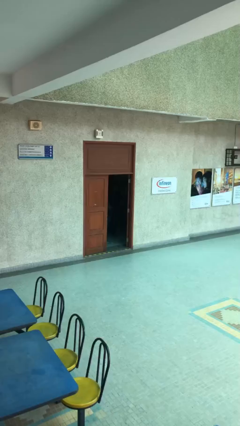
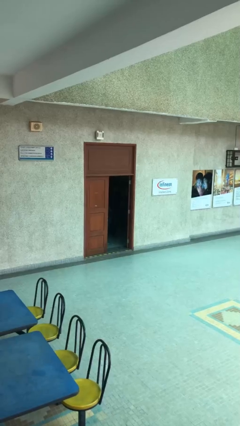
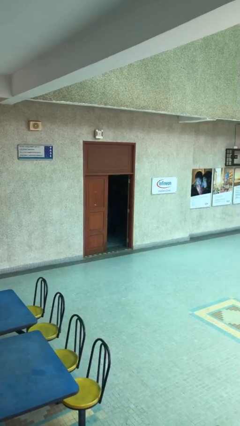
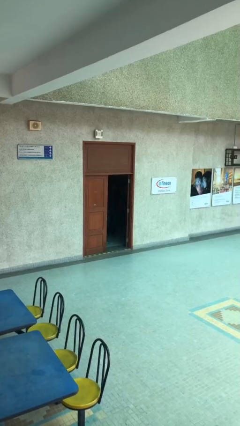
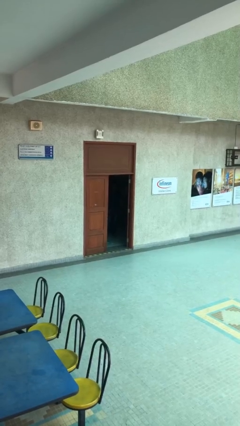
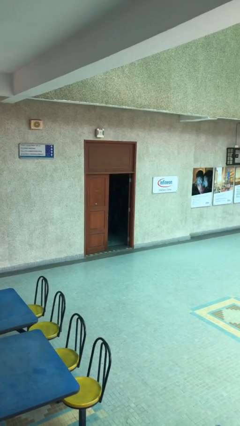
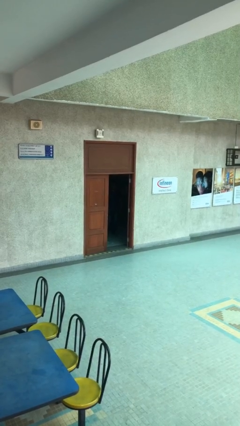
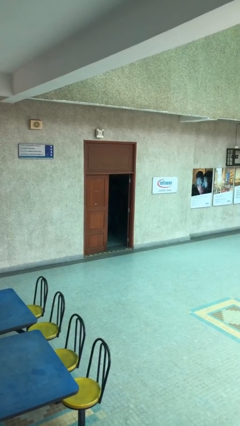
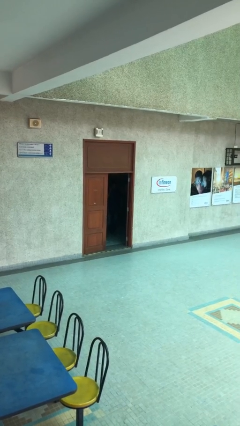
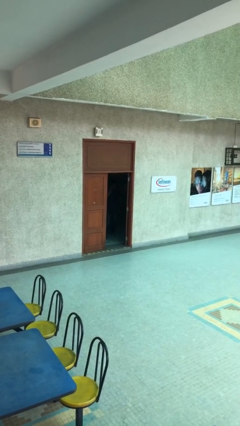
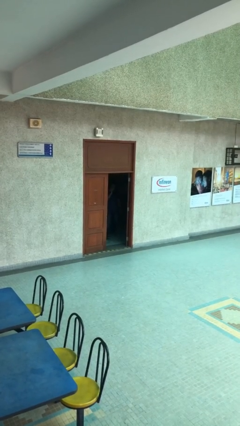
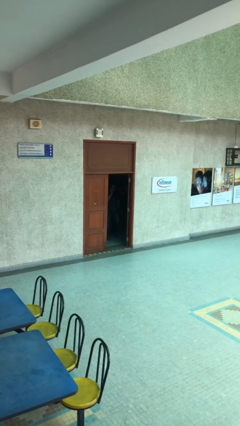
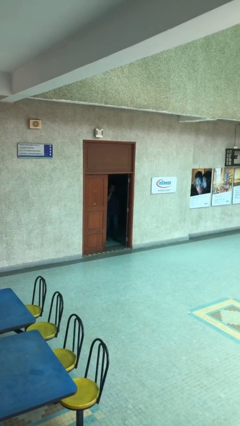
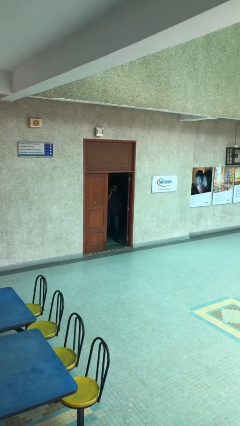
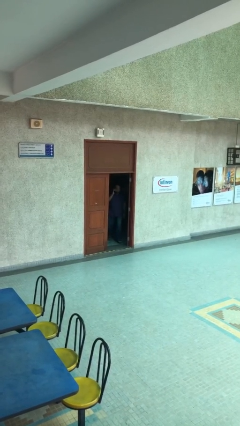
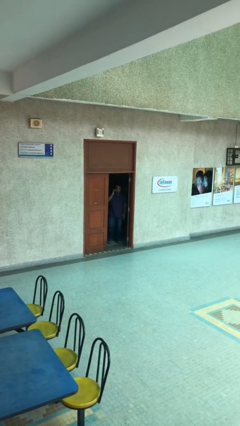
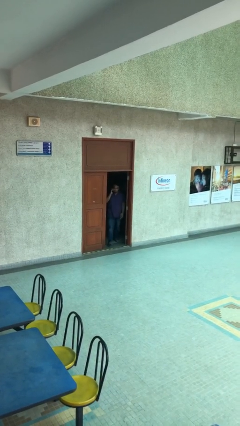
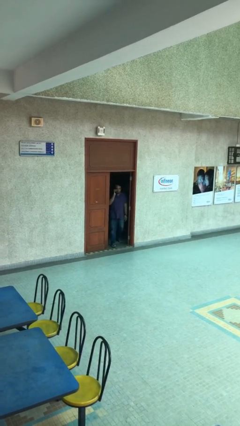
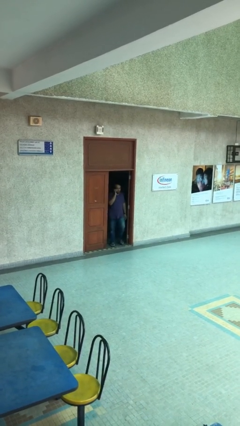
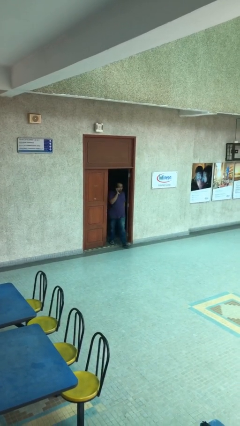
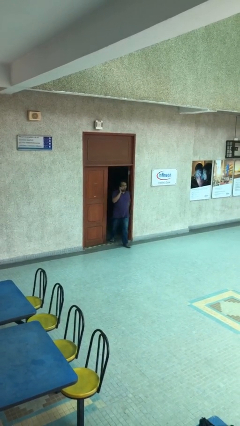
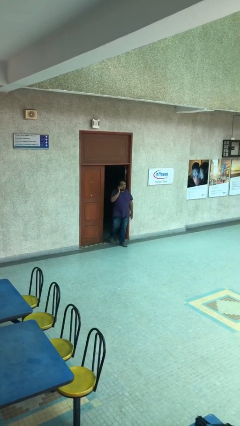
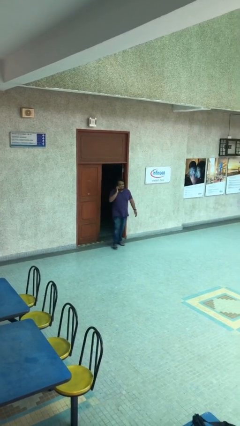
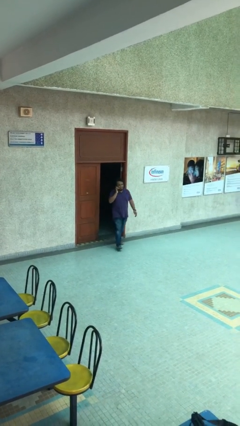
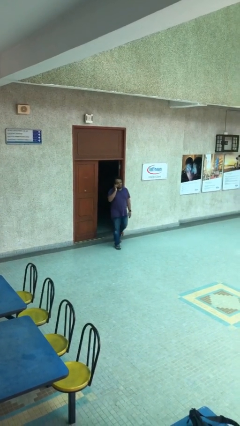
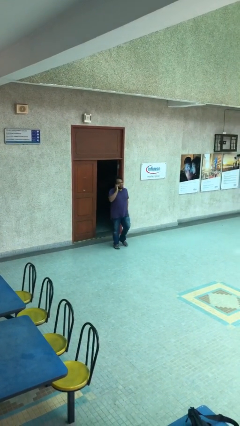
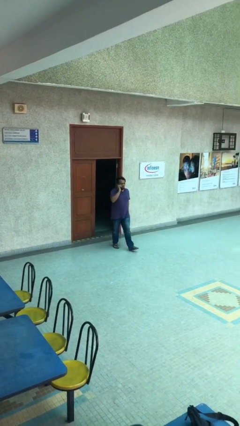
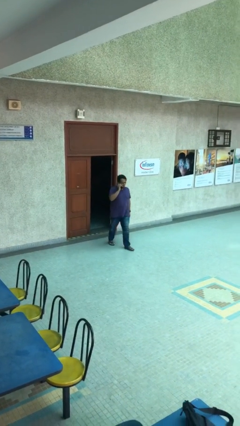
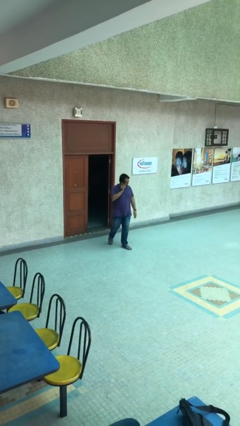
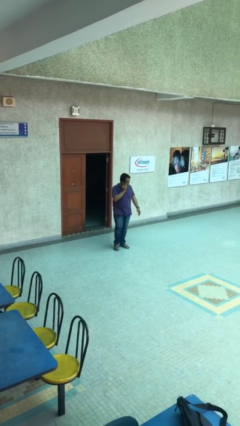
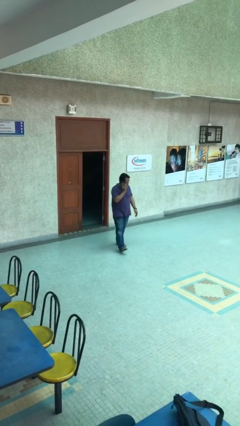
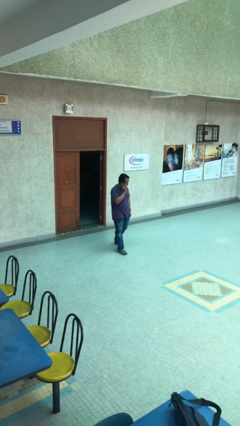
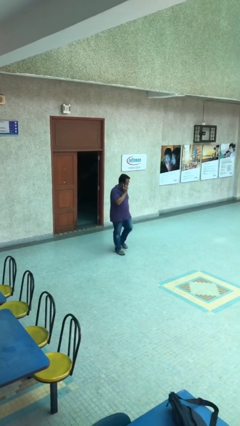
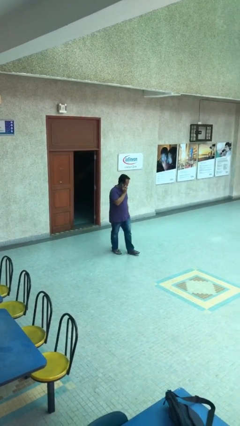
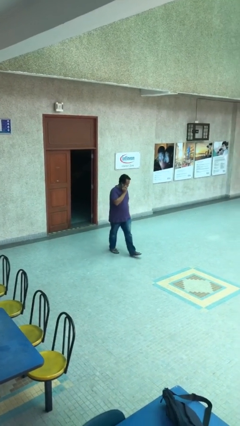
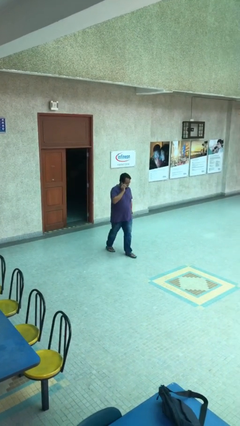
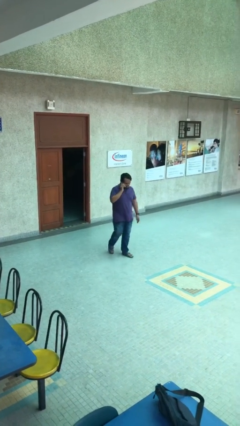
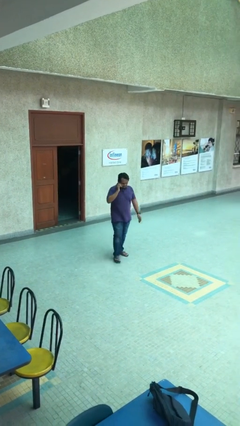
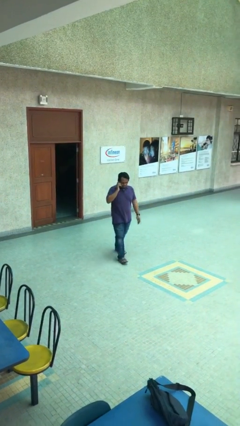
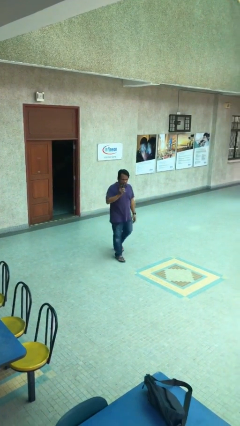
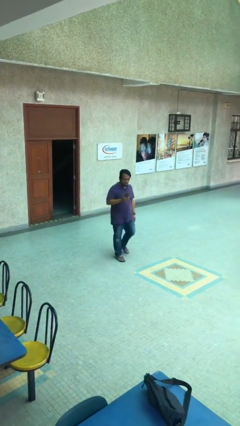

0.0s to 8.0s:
person enters scene through structure

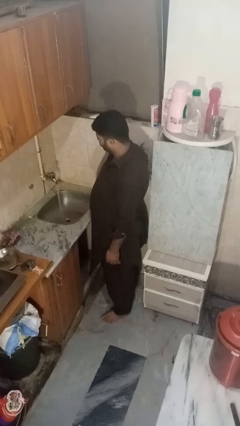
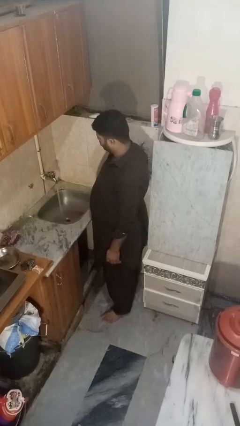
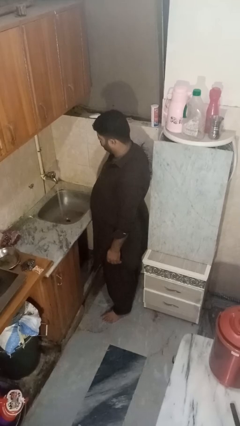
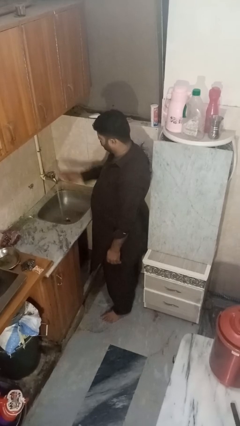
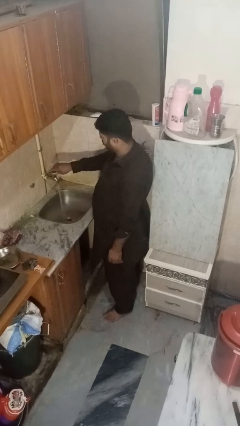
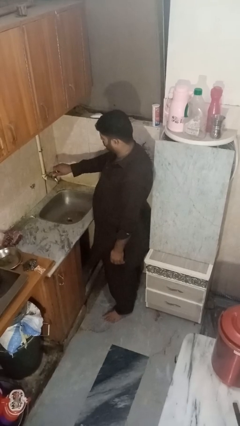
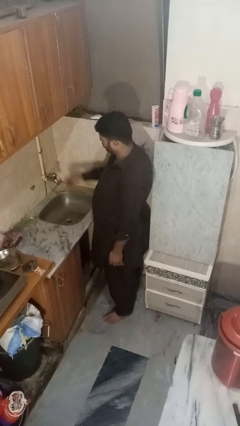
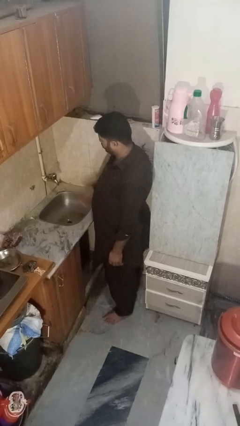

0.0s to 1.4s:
person turns off faucet

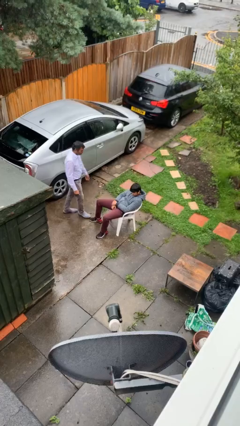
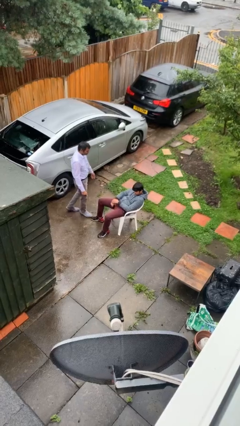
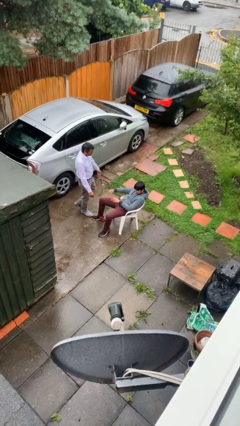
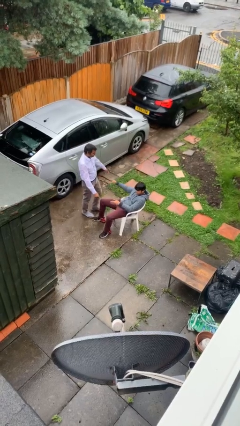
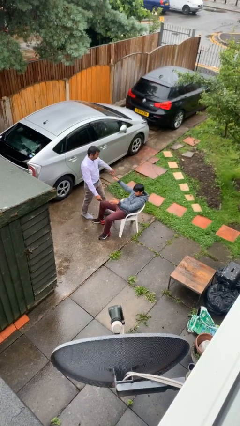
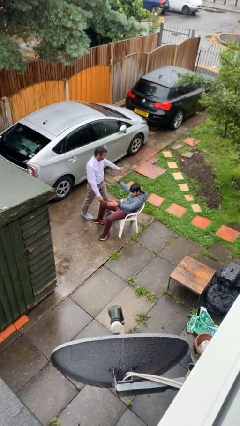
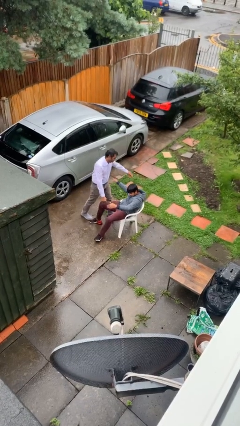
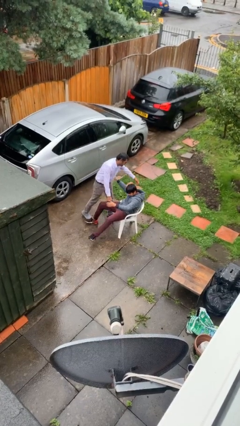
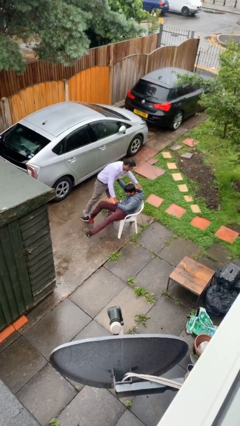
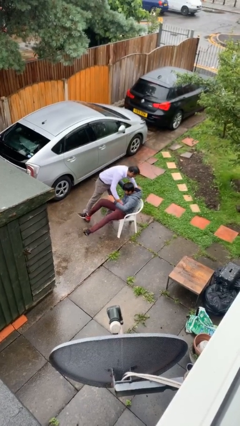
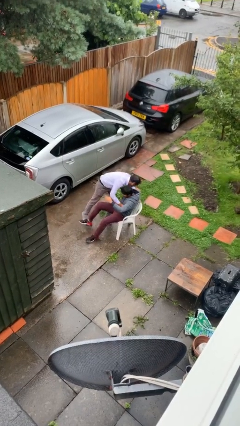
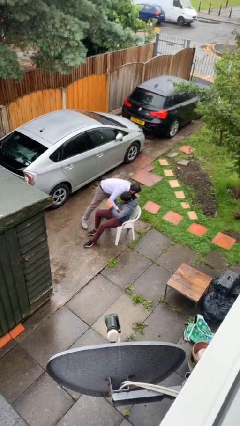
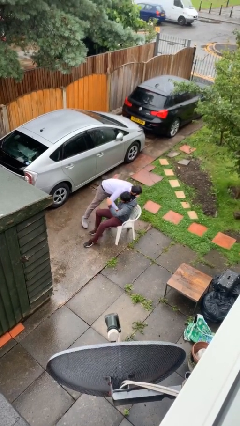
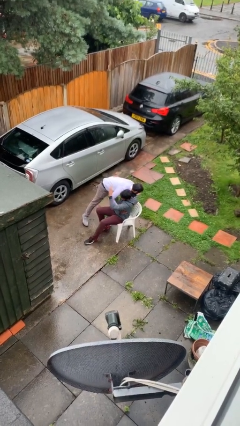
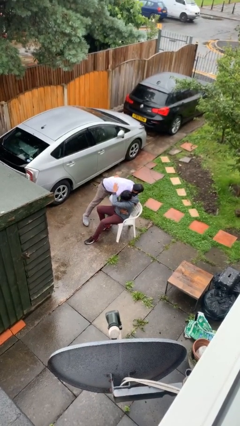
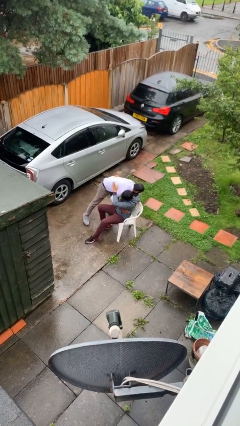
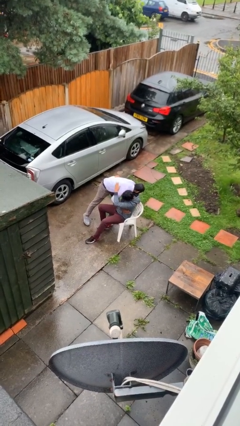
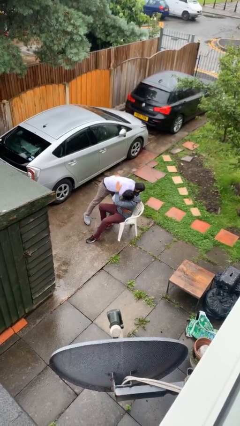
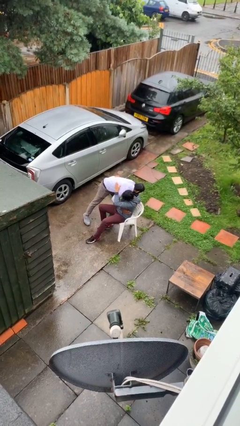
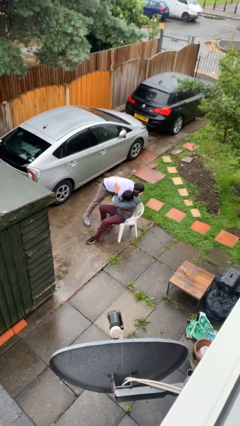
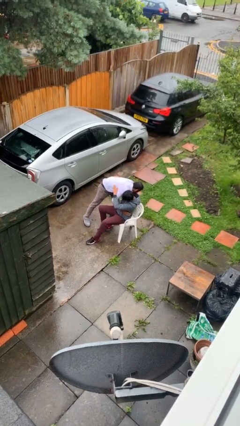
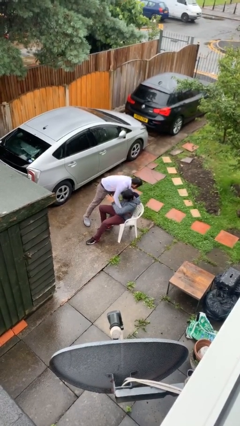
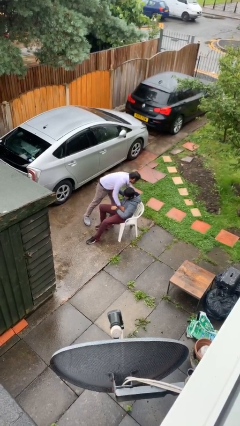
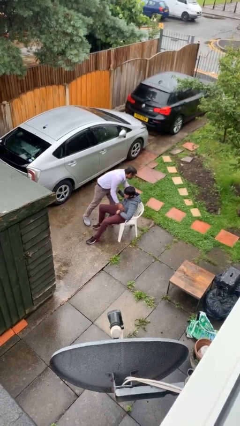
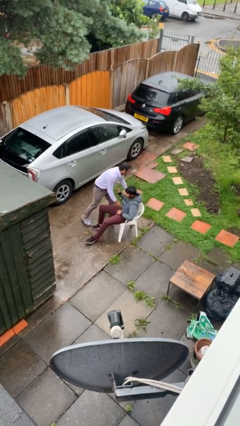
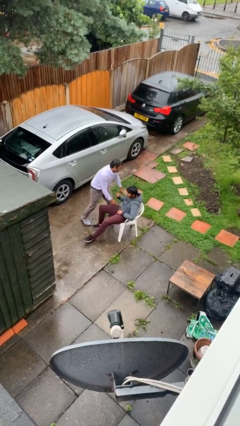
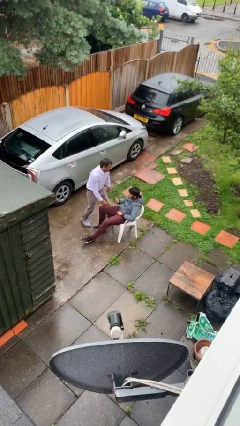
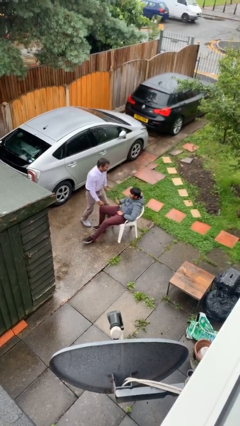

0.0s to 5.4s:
person embraces person

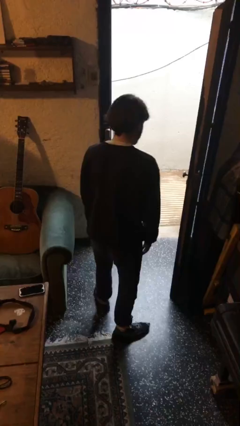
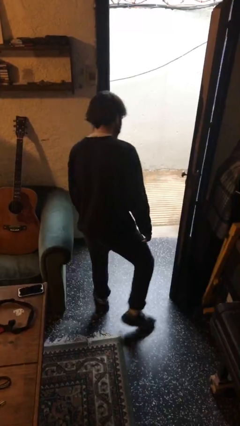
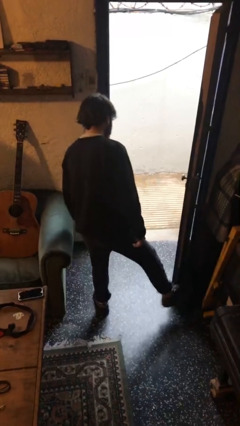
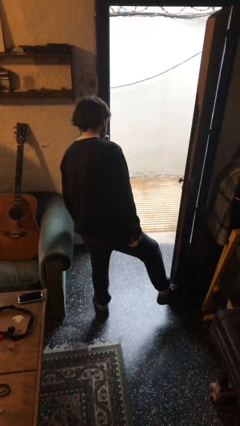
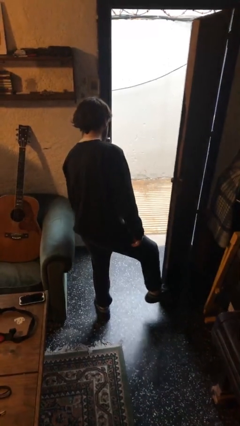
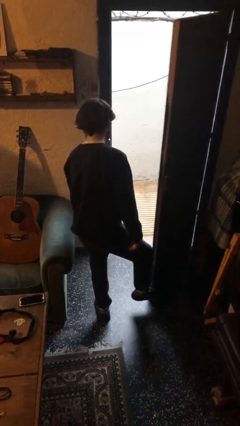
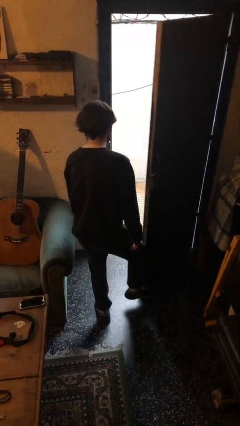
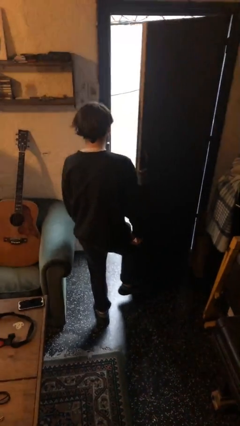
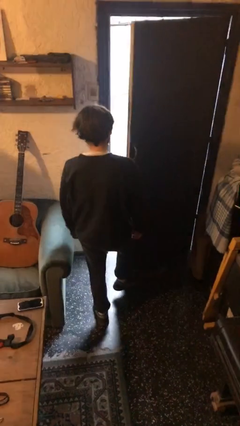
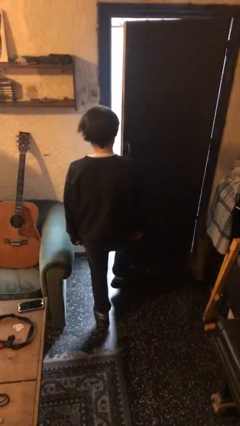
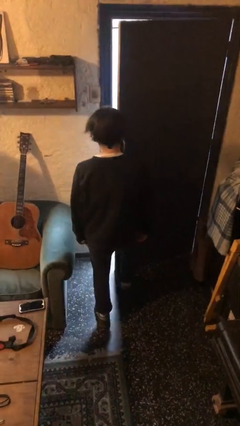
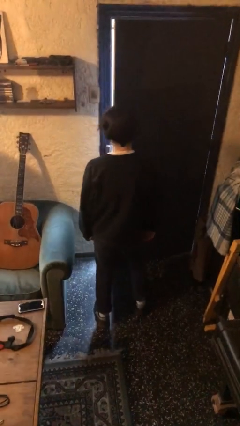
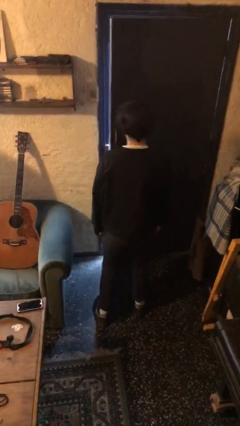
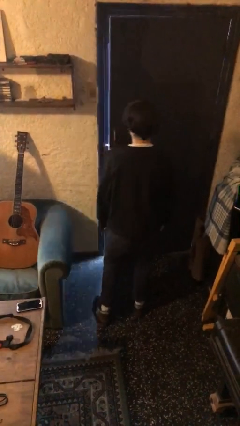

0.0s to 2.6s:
person closes door with foot
